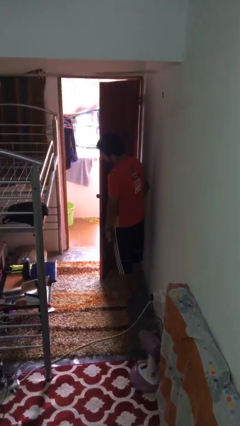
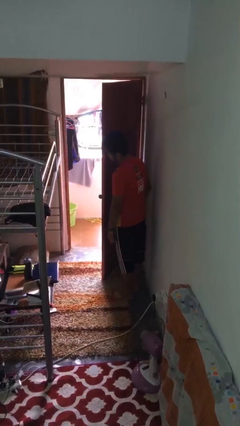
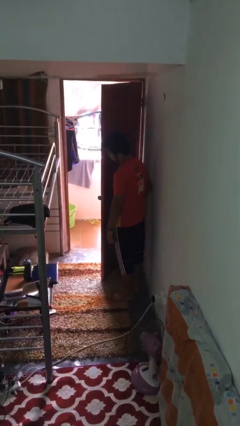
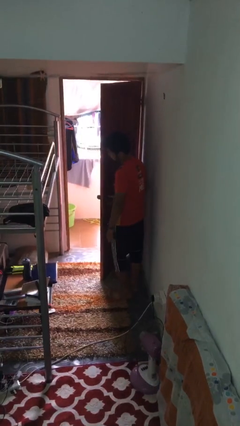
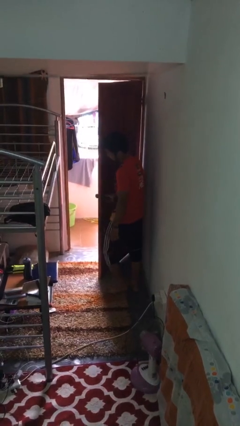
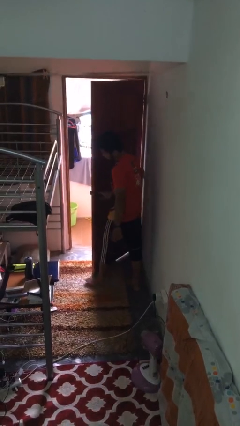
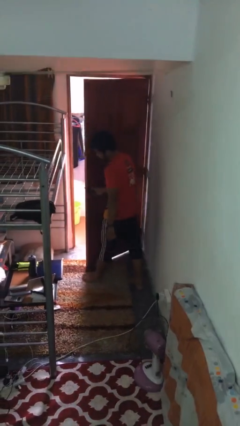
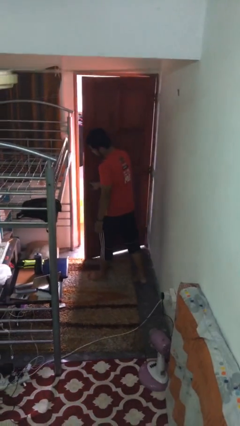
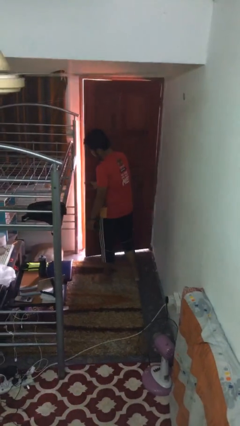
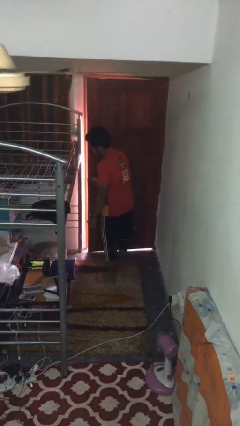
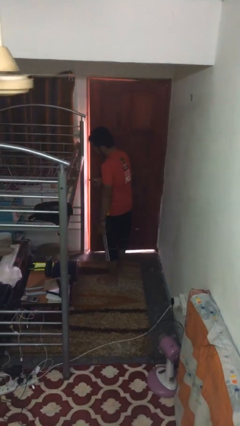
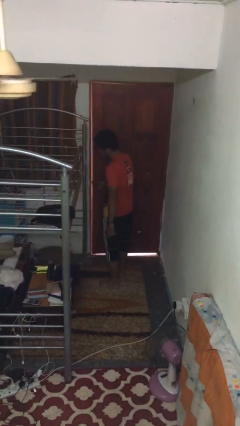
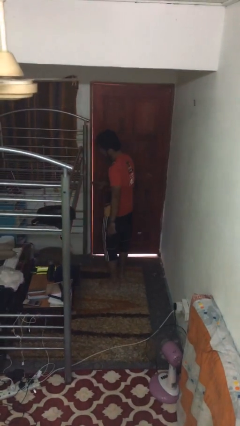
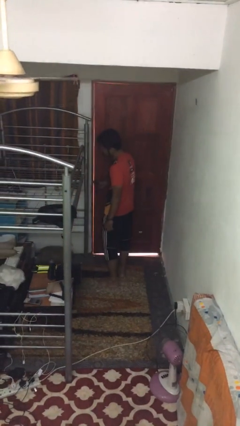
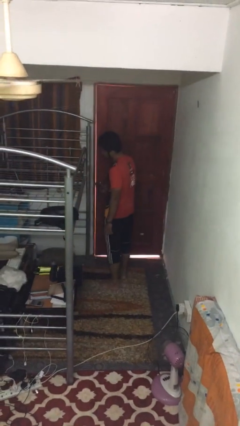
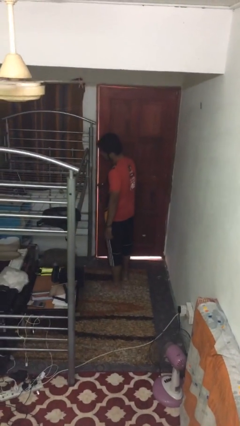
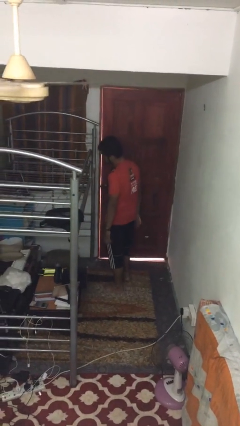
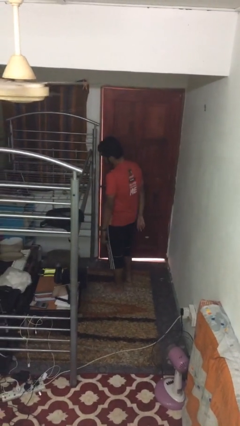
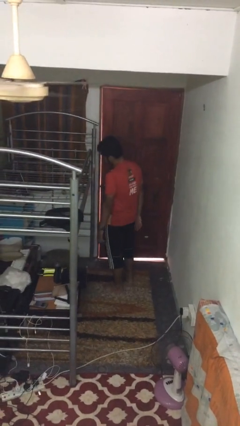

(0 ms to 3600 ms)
person closes facility door

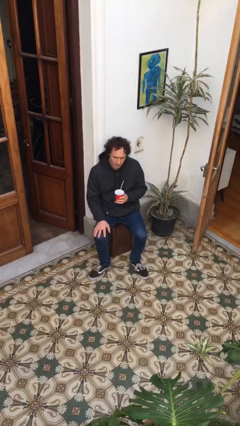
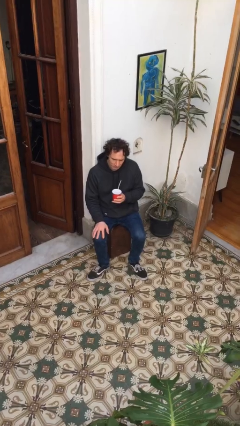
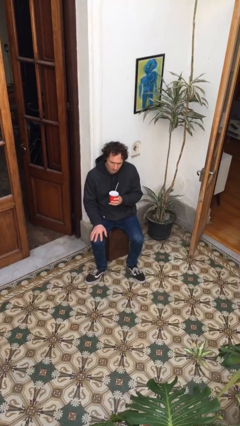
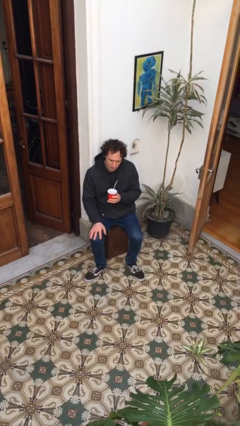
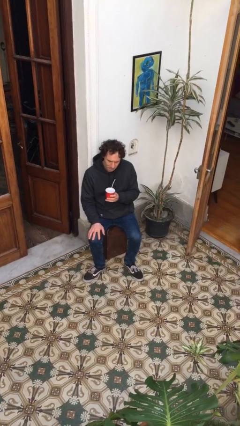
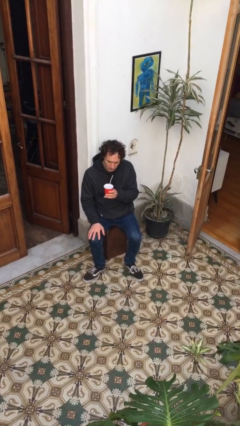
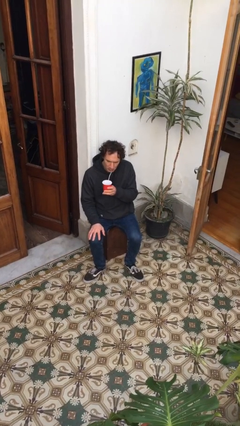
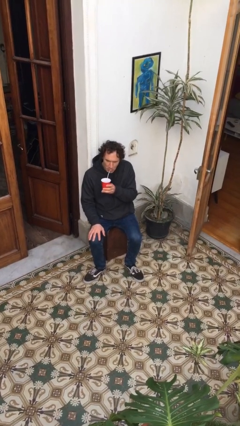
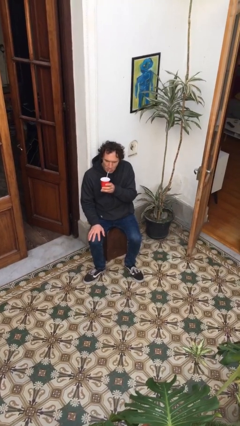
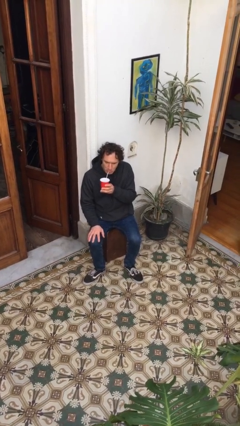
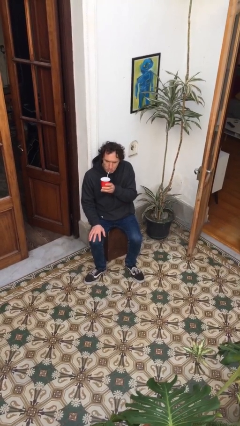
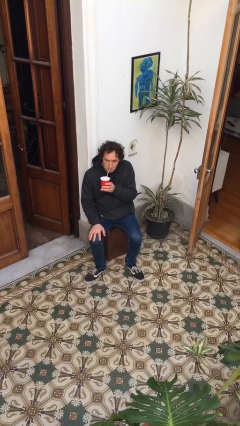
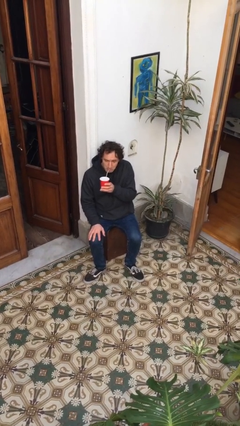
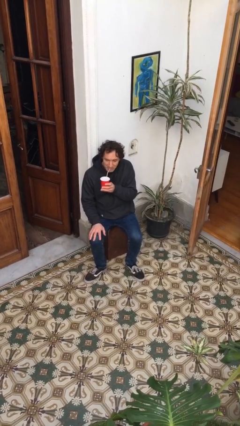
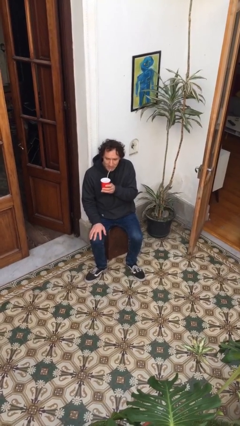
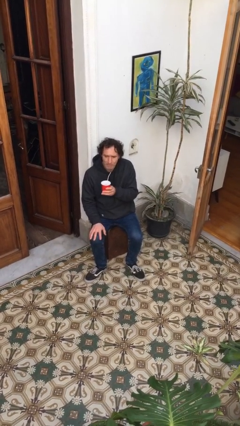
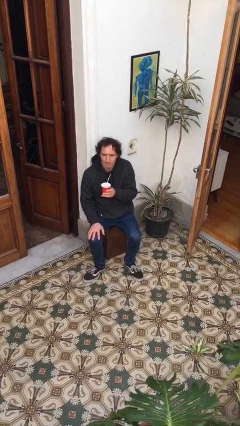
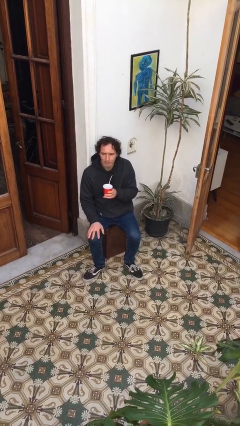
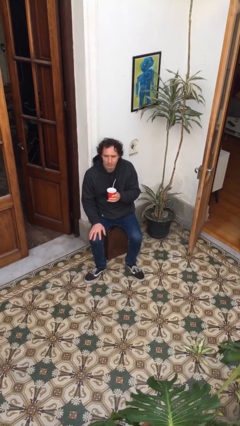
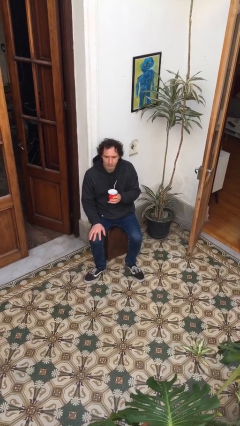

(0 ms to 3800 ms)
person drinks from straw

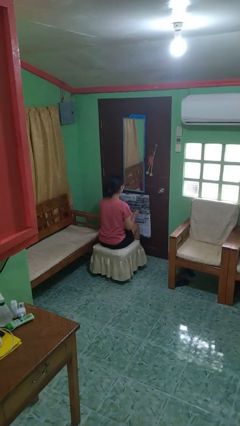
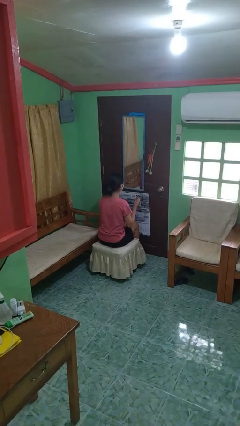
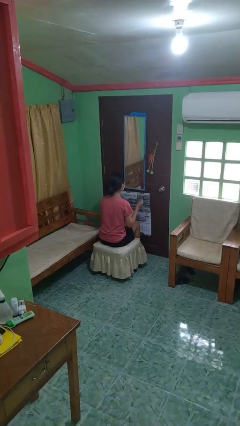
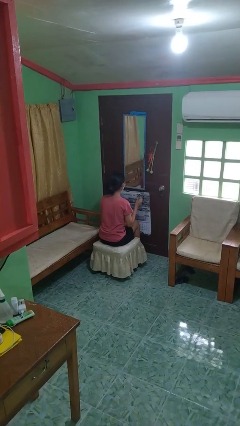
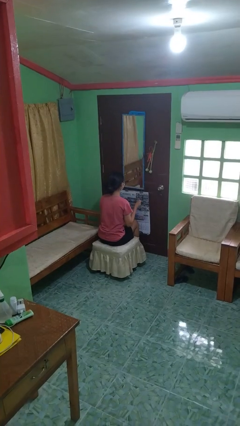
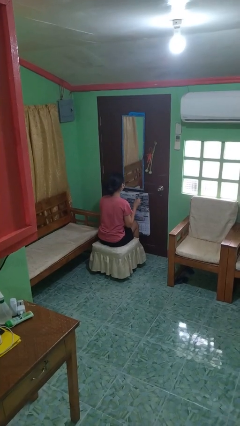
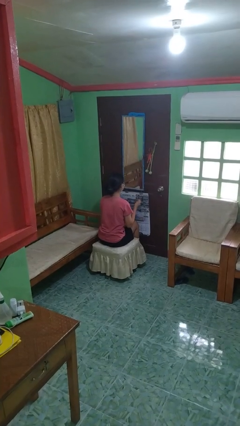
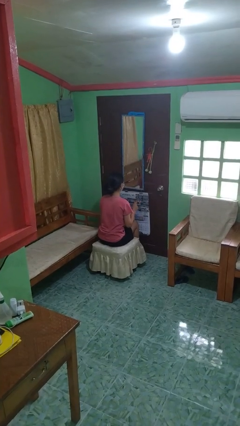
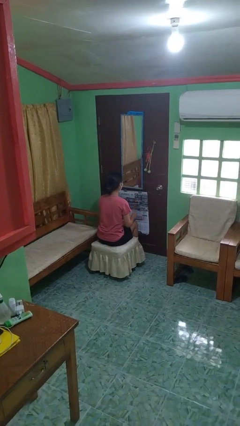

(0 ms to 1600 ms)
person snaps fingers

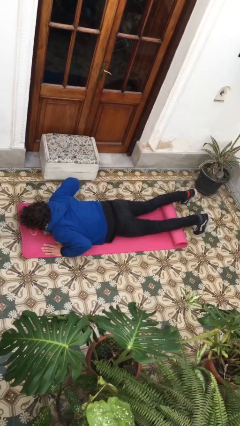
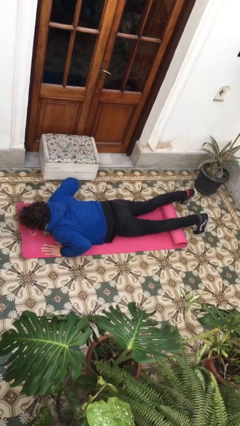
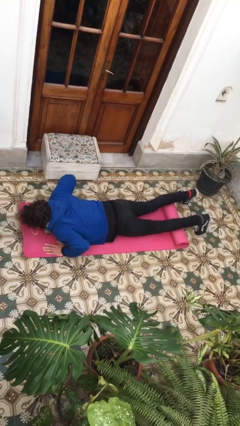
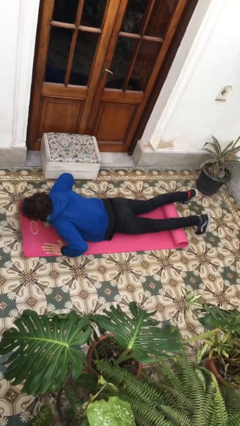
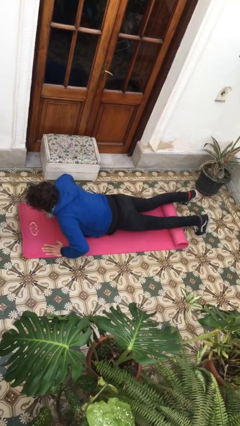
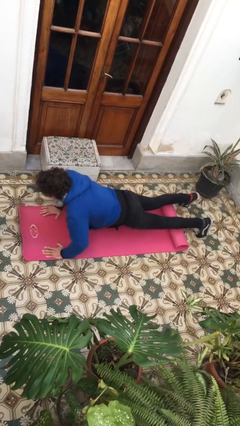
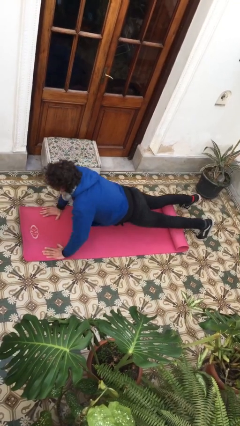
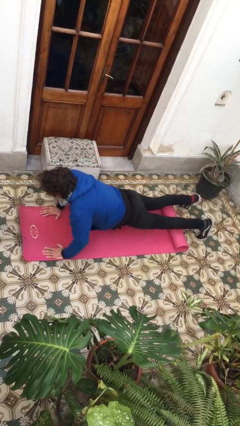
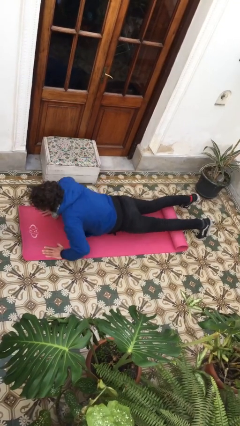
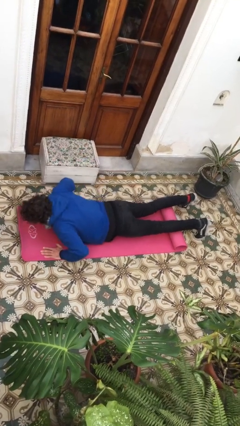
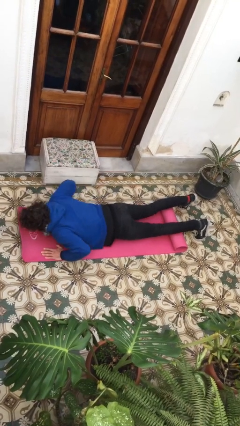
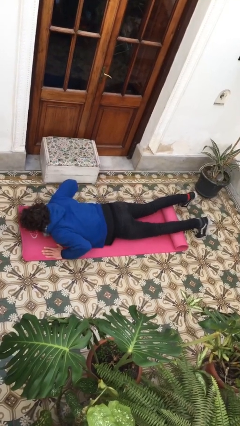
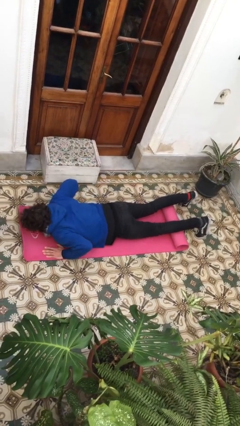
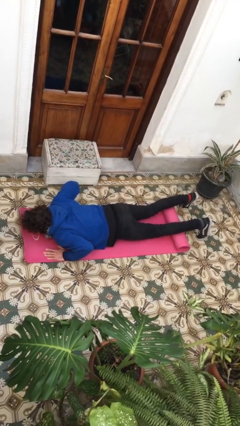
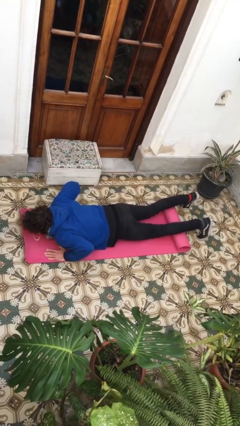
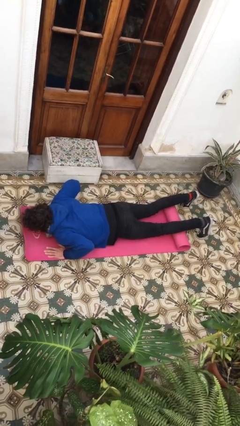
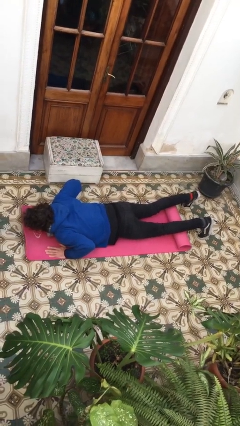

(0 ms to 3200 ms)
person exercises with pushup

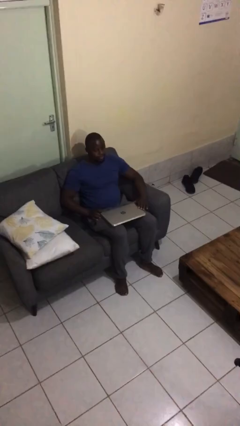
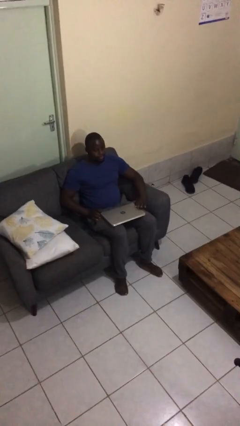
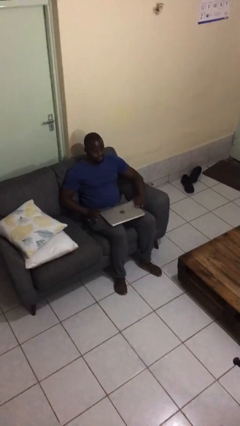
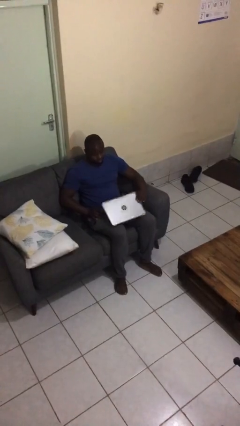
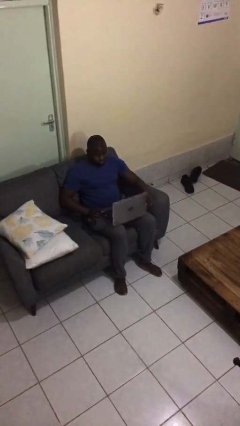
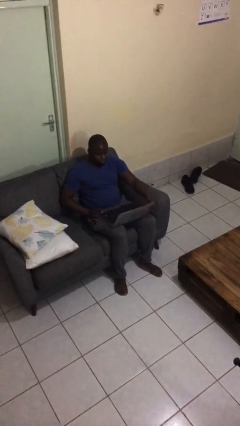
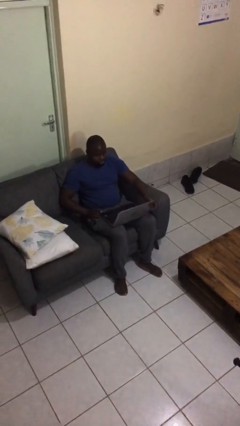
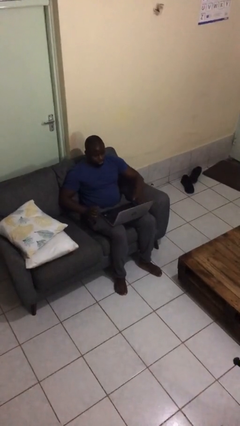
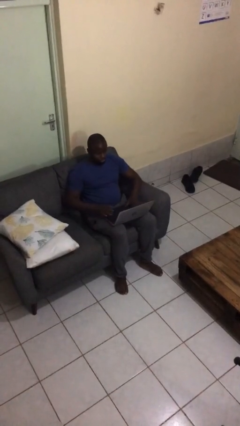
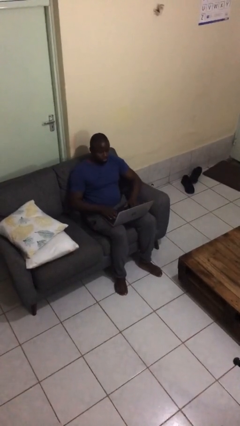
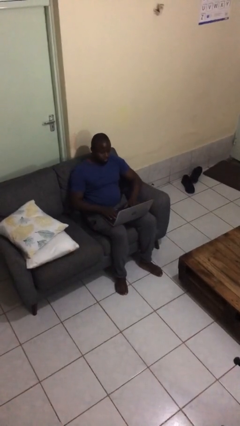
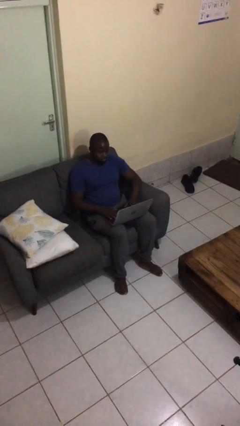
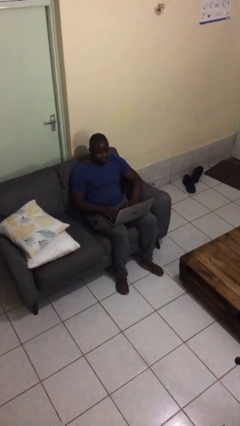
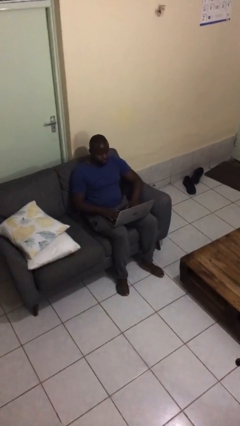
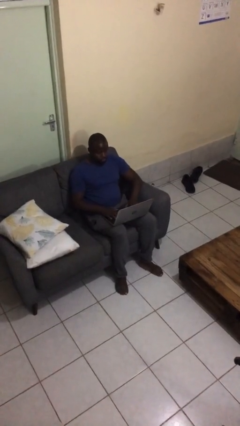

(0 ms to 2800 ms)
person opens laptop

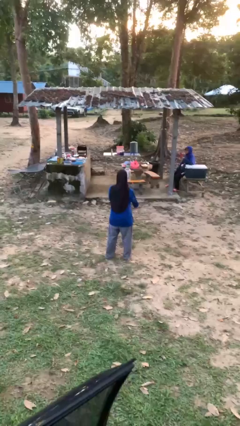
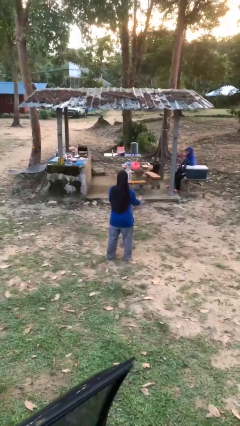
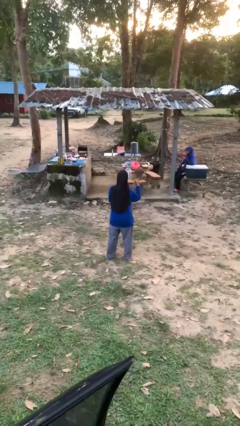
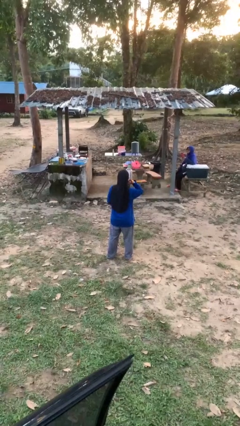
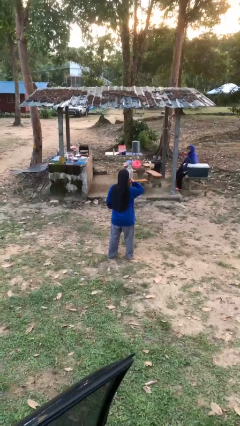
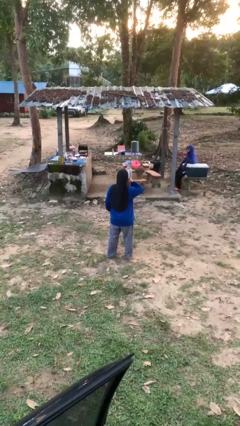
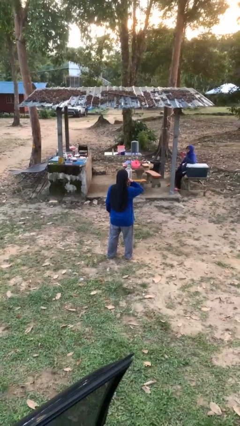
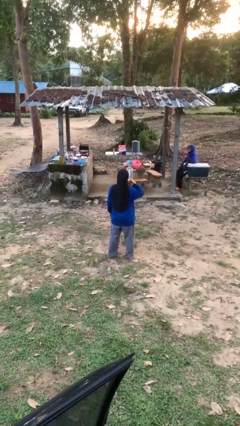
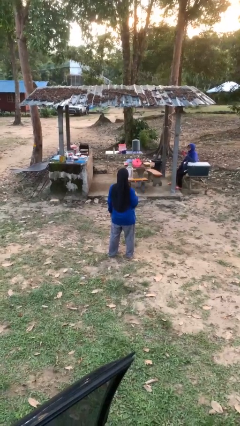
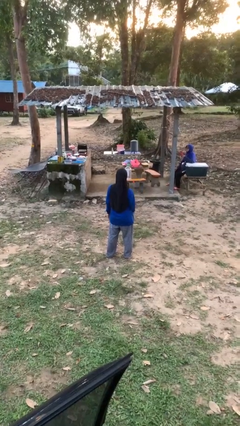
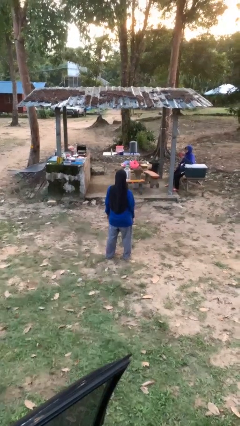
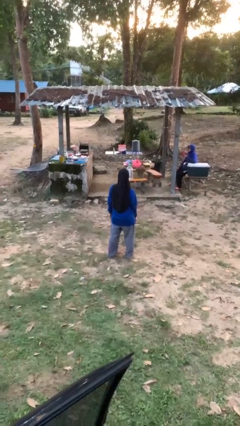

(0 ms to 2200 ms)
person gestures call me
